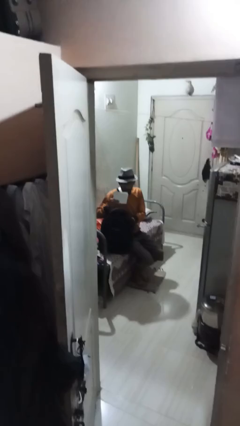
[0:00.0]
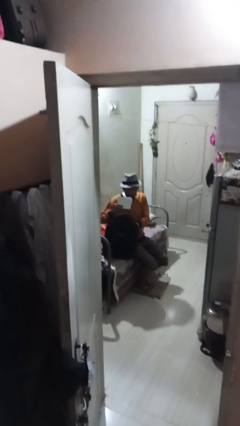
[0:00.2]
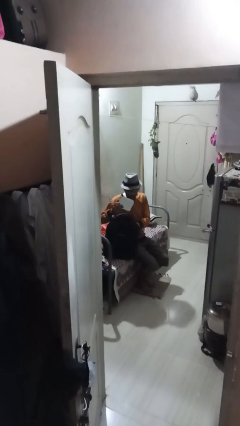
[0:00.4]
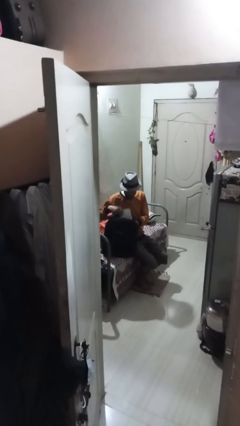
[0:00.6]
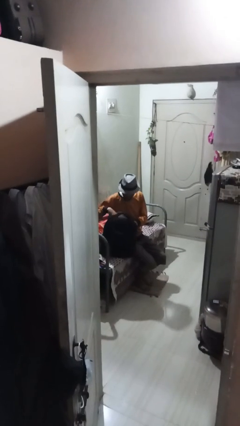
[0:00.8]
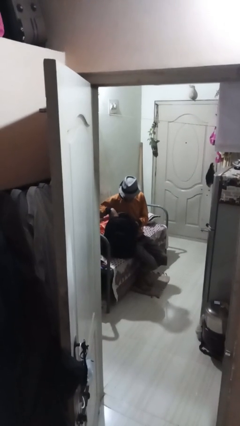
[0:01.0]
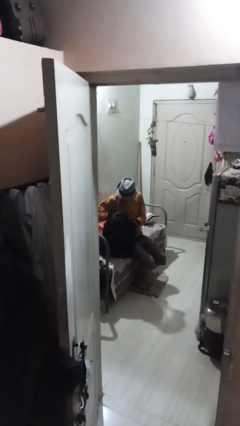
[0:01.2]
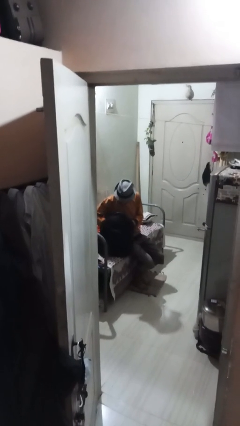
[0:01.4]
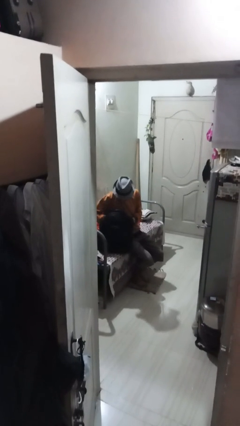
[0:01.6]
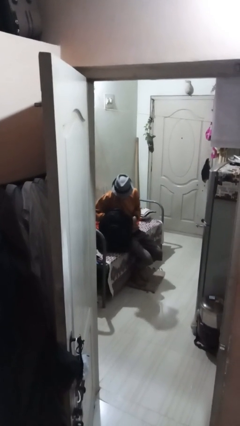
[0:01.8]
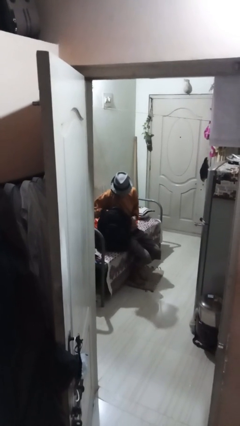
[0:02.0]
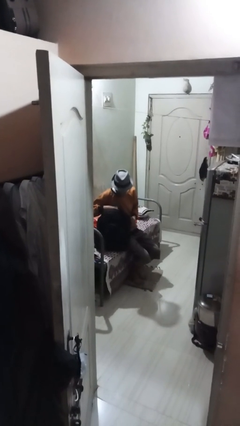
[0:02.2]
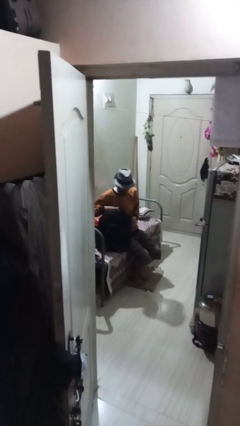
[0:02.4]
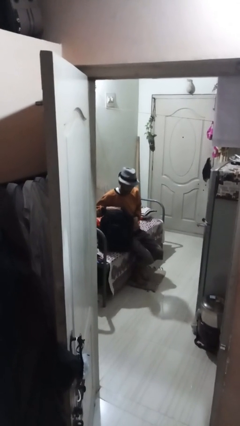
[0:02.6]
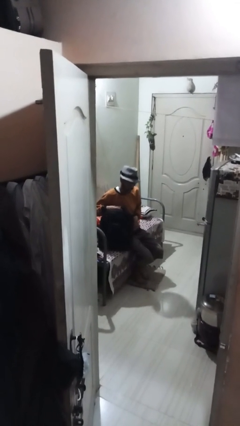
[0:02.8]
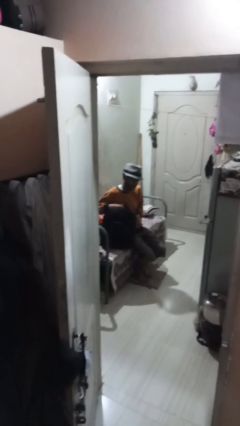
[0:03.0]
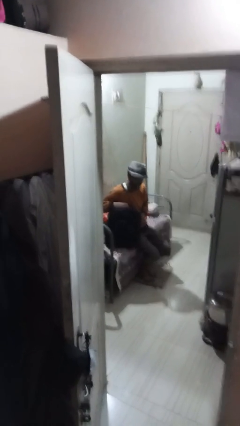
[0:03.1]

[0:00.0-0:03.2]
person puts object into backpack

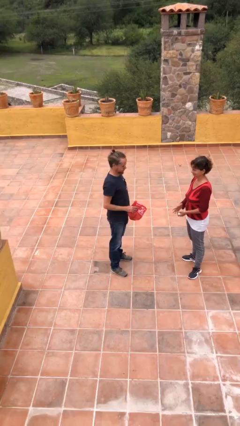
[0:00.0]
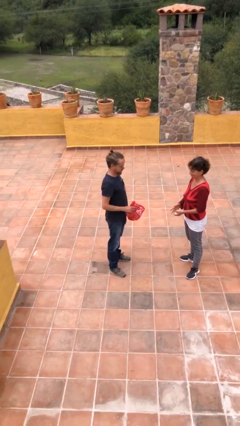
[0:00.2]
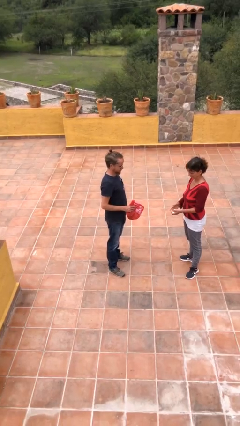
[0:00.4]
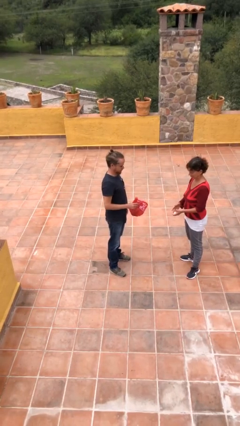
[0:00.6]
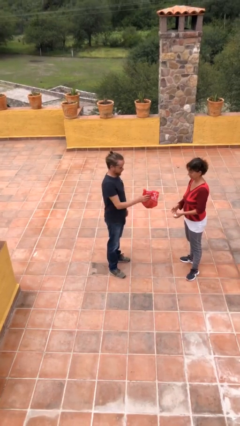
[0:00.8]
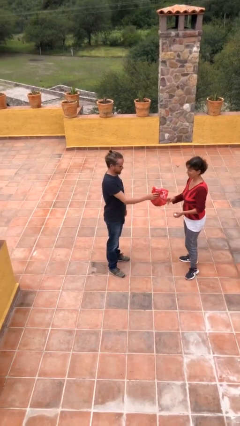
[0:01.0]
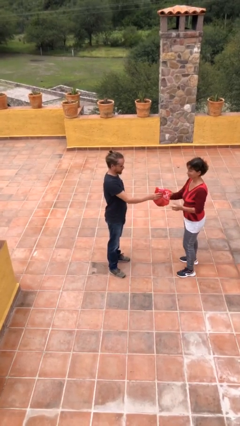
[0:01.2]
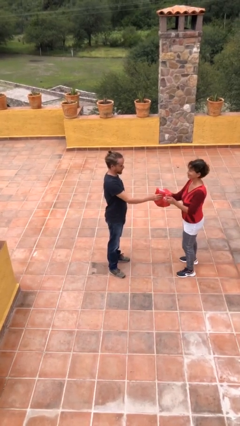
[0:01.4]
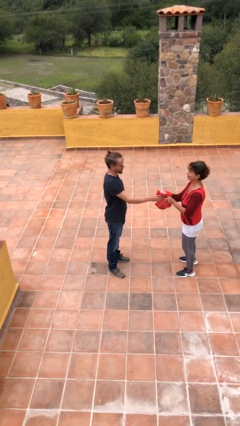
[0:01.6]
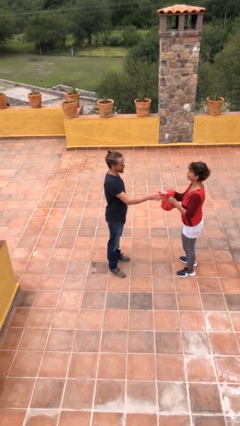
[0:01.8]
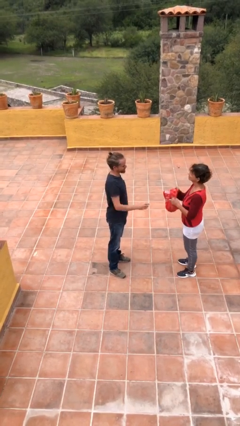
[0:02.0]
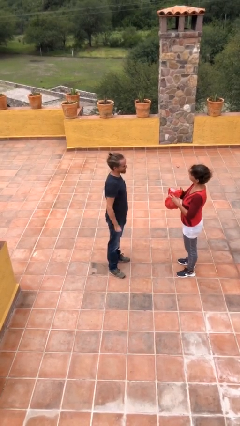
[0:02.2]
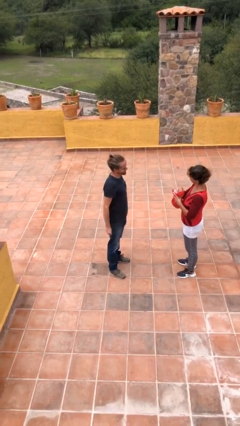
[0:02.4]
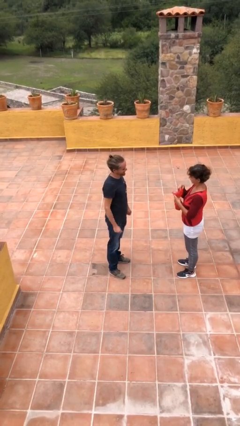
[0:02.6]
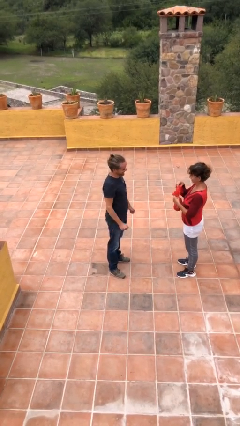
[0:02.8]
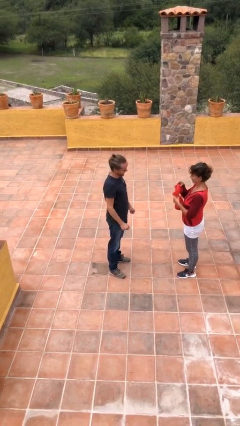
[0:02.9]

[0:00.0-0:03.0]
person transfers object to person

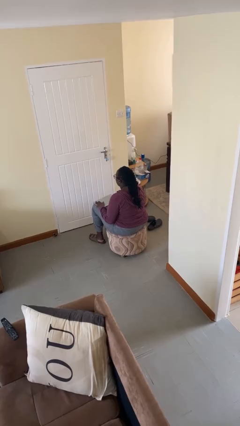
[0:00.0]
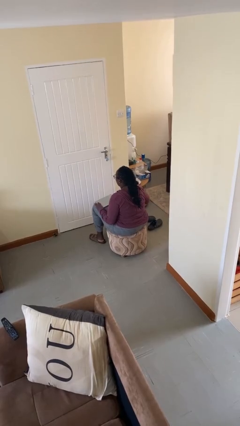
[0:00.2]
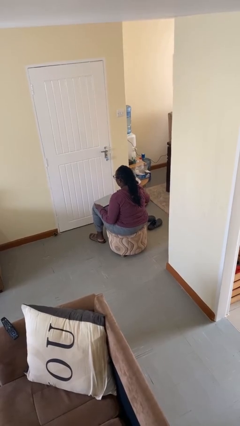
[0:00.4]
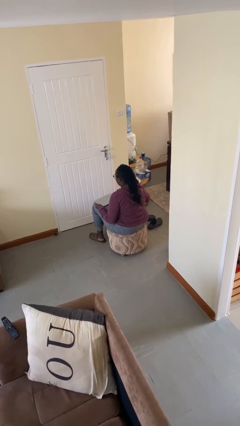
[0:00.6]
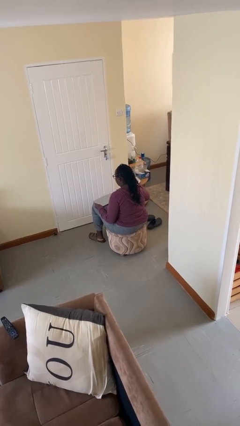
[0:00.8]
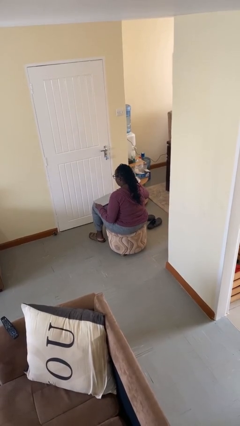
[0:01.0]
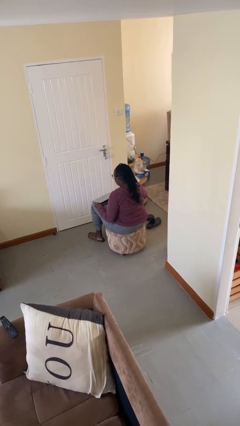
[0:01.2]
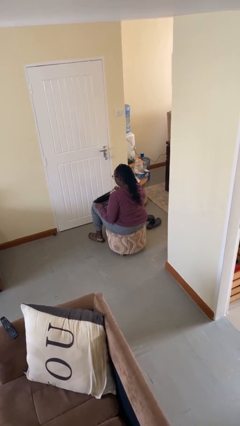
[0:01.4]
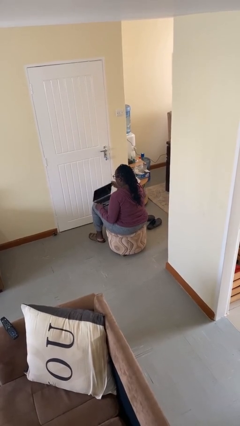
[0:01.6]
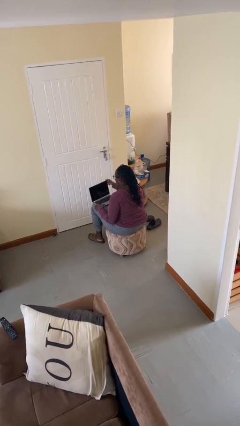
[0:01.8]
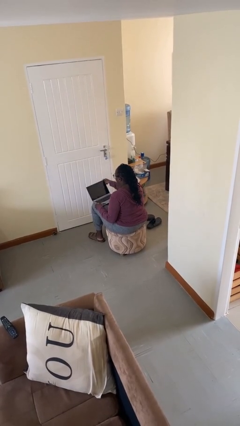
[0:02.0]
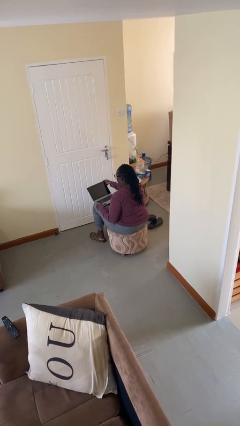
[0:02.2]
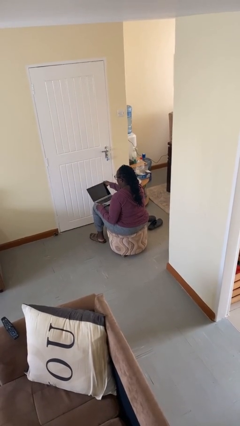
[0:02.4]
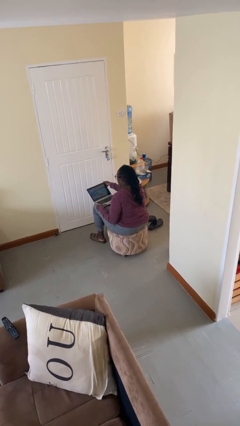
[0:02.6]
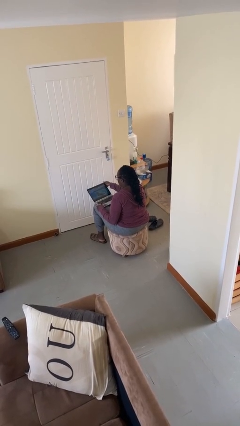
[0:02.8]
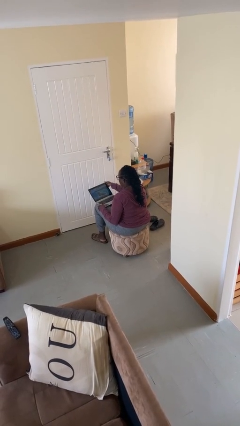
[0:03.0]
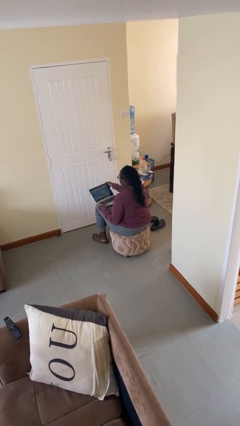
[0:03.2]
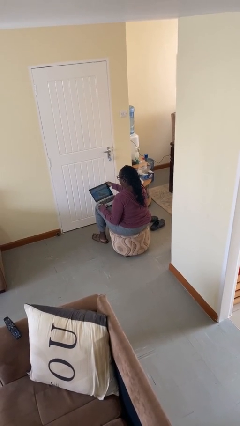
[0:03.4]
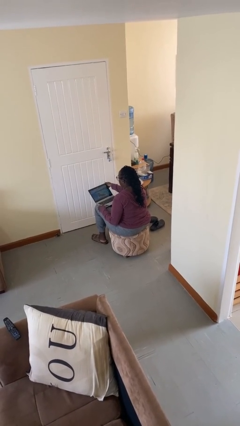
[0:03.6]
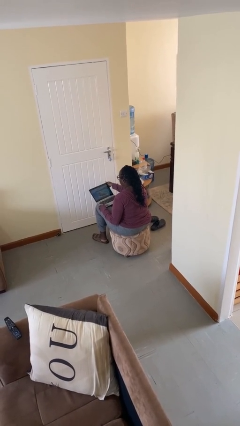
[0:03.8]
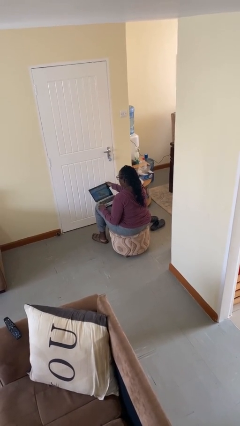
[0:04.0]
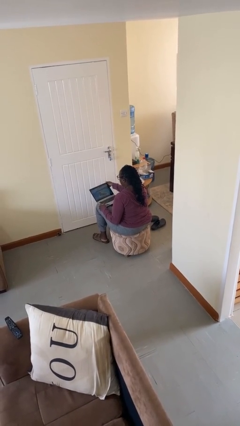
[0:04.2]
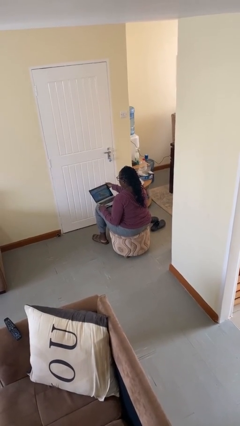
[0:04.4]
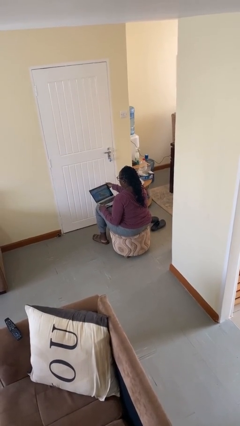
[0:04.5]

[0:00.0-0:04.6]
person opens laptop

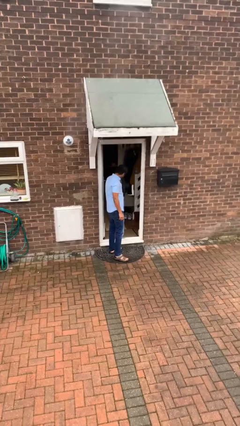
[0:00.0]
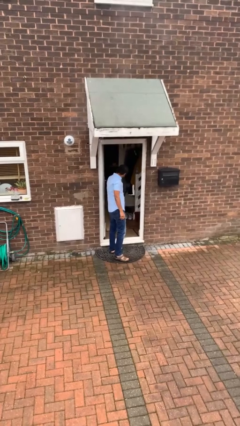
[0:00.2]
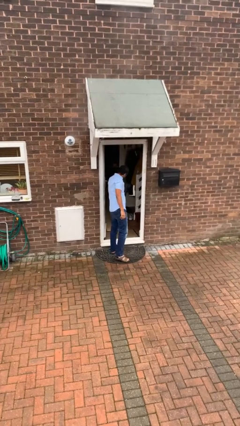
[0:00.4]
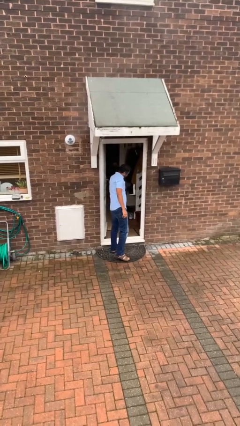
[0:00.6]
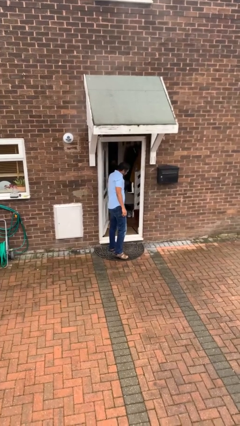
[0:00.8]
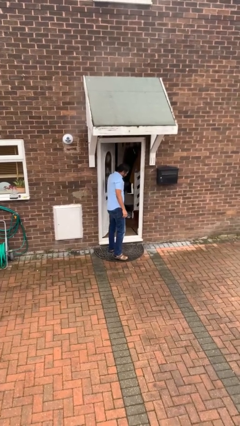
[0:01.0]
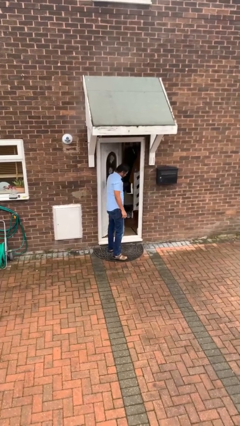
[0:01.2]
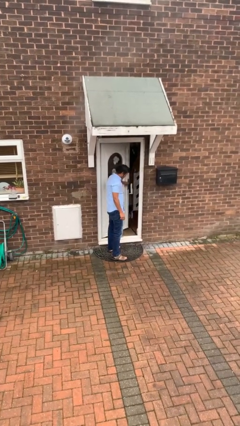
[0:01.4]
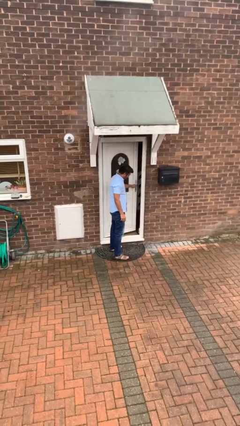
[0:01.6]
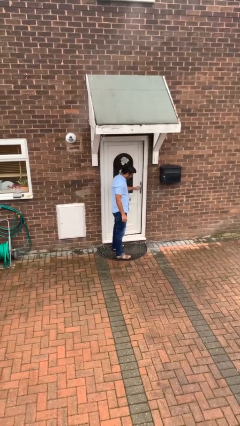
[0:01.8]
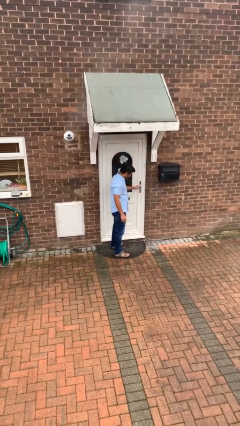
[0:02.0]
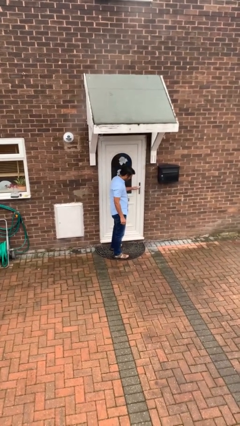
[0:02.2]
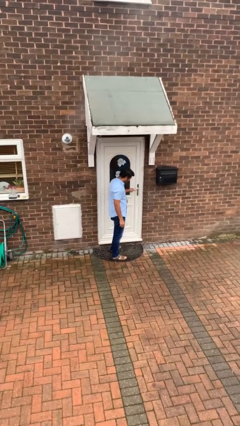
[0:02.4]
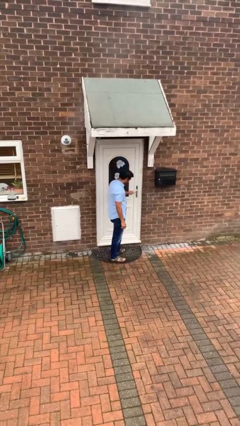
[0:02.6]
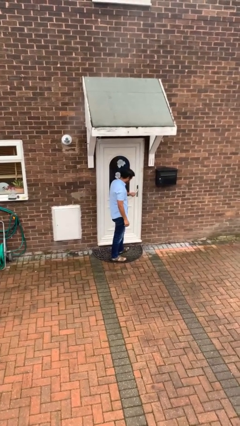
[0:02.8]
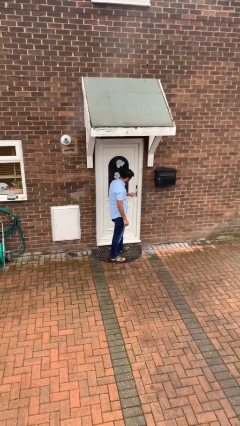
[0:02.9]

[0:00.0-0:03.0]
person closes facility door

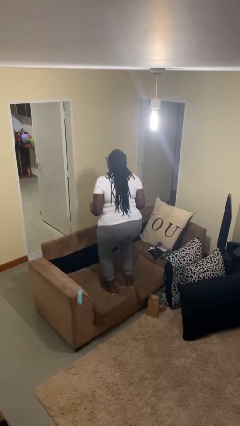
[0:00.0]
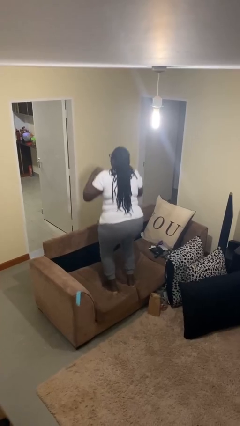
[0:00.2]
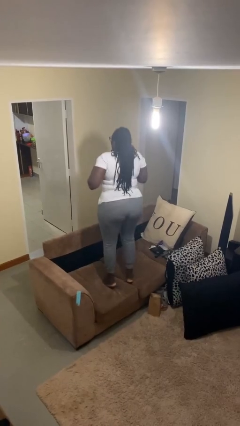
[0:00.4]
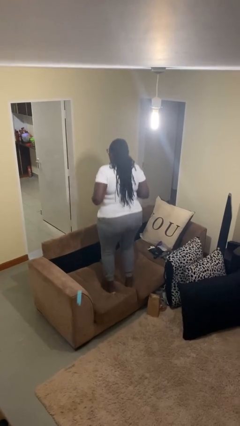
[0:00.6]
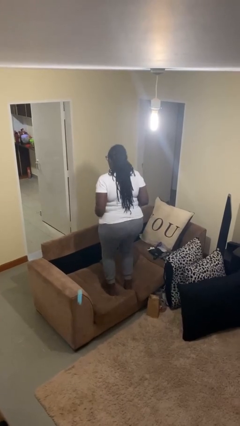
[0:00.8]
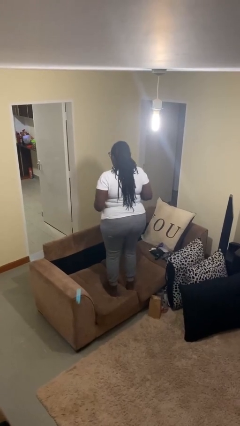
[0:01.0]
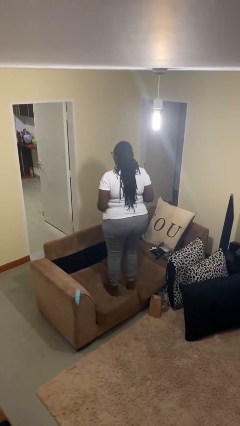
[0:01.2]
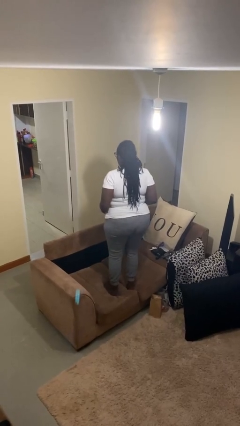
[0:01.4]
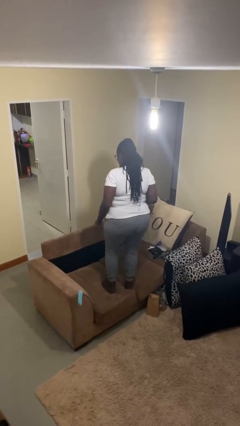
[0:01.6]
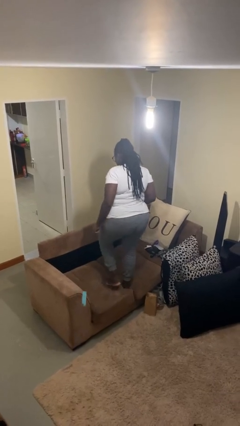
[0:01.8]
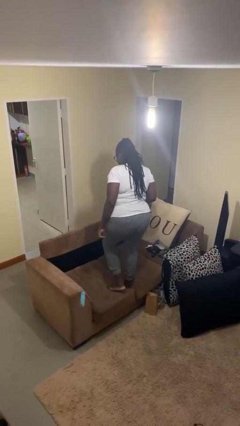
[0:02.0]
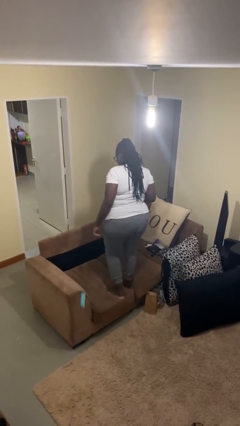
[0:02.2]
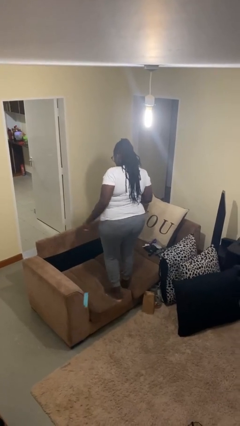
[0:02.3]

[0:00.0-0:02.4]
person jumps on couch

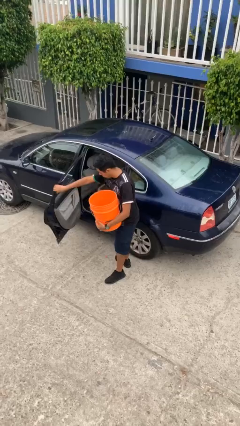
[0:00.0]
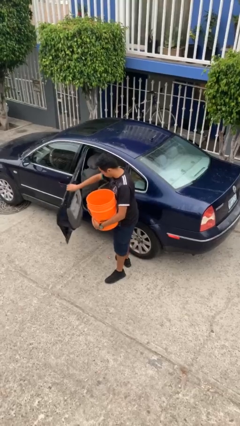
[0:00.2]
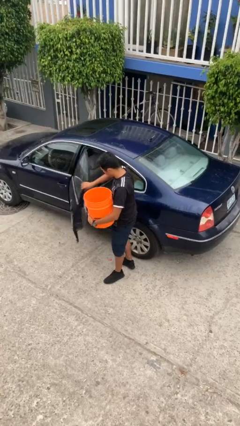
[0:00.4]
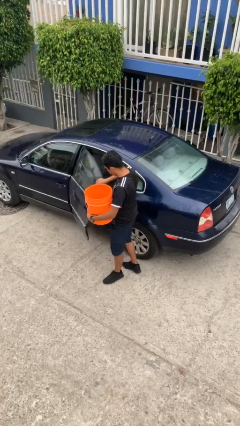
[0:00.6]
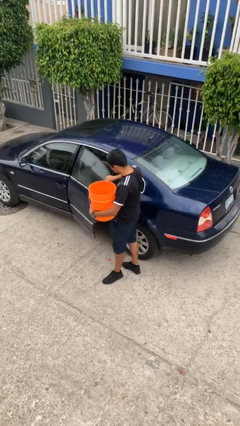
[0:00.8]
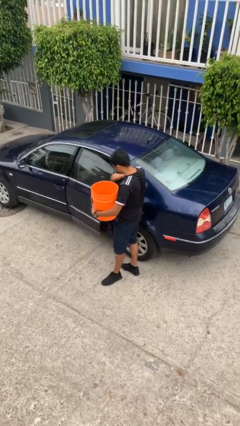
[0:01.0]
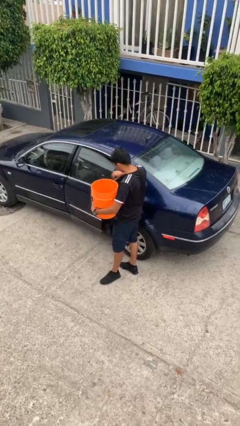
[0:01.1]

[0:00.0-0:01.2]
person closes car door
